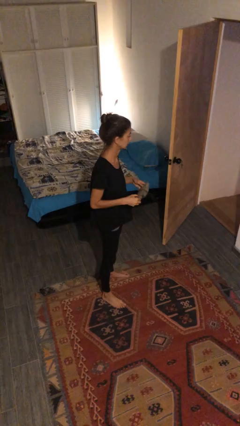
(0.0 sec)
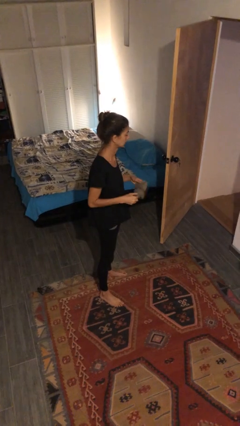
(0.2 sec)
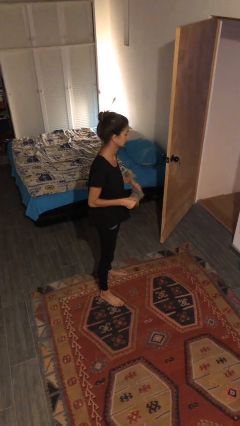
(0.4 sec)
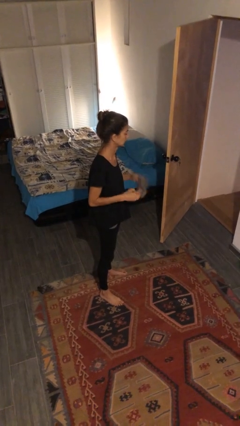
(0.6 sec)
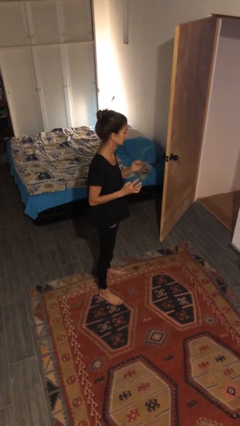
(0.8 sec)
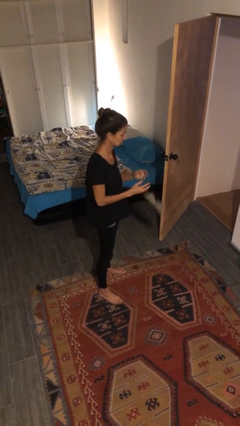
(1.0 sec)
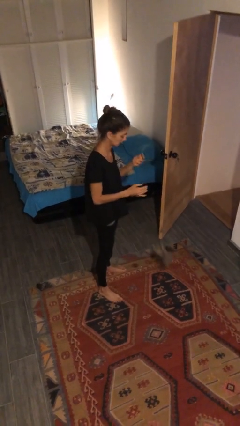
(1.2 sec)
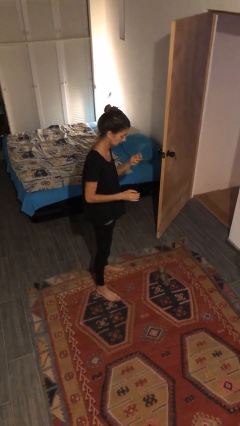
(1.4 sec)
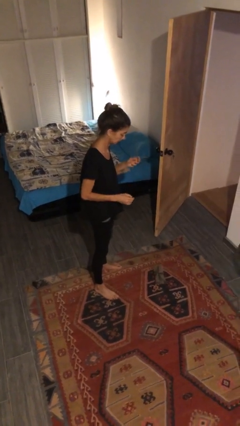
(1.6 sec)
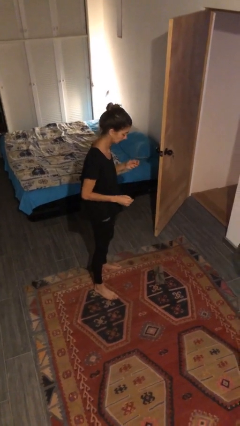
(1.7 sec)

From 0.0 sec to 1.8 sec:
person drops object

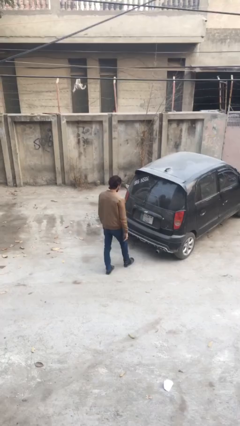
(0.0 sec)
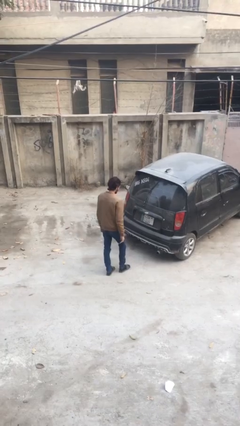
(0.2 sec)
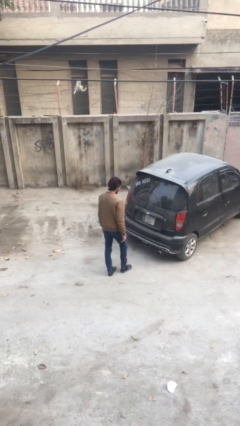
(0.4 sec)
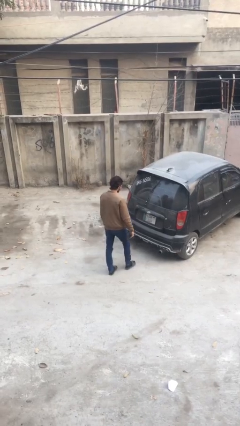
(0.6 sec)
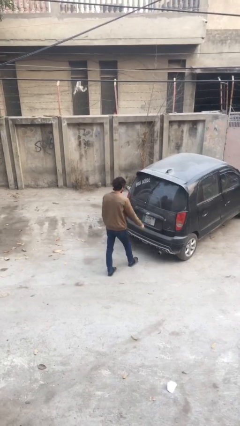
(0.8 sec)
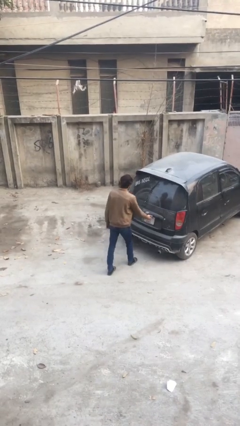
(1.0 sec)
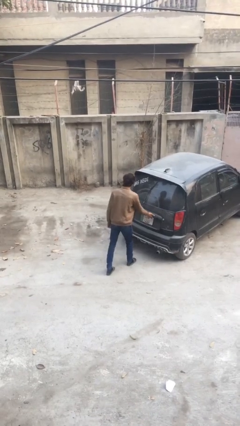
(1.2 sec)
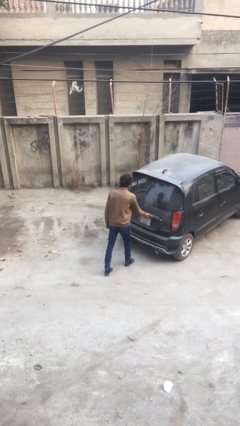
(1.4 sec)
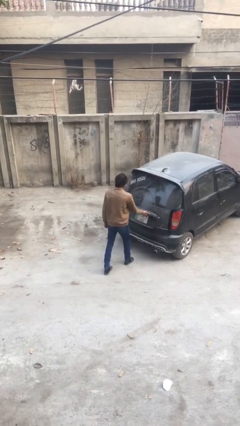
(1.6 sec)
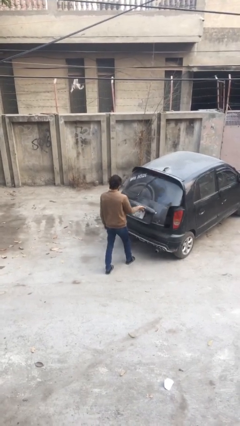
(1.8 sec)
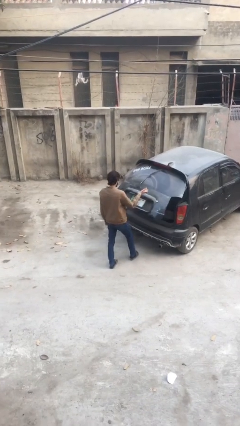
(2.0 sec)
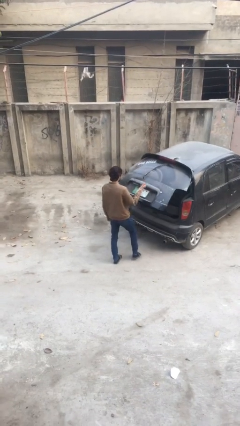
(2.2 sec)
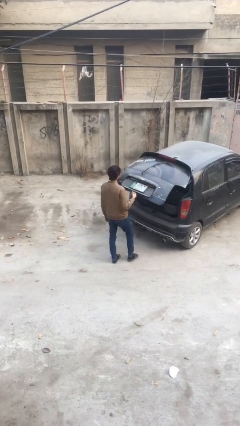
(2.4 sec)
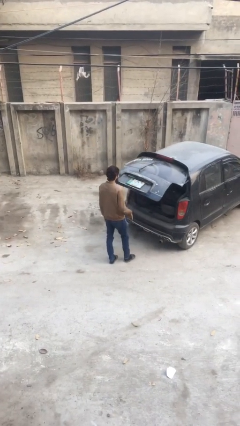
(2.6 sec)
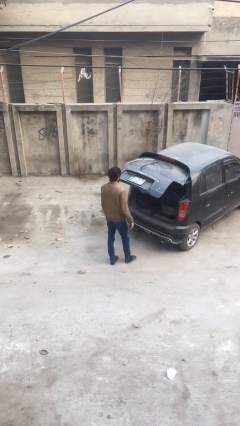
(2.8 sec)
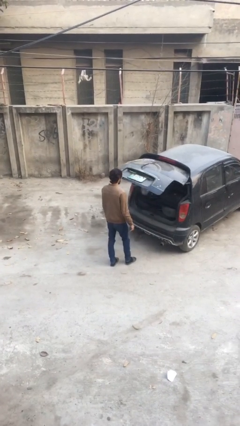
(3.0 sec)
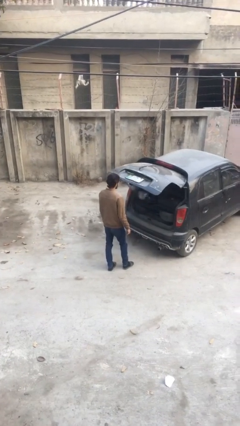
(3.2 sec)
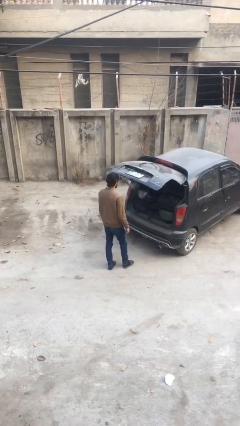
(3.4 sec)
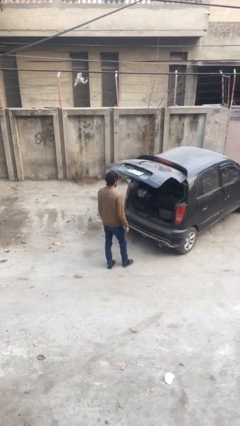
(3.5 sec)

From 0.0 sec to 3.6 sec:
person opens car trunk

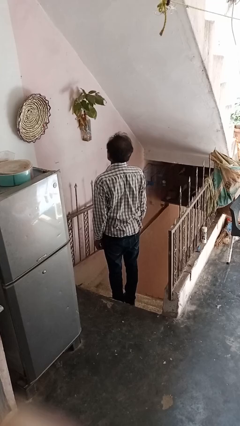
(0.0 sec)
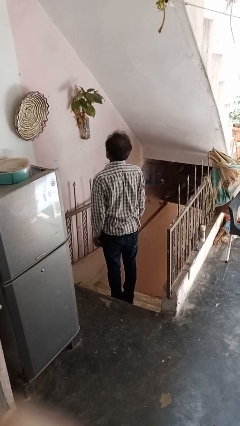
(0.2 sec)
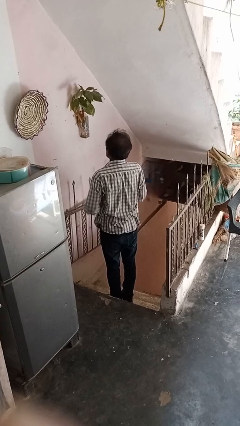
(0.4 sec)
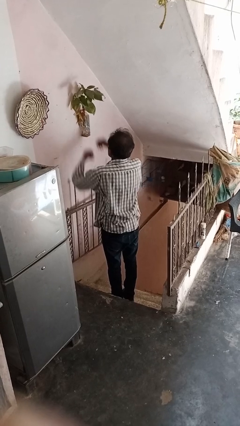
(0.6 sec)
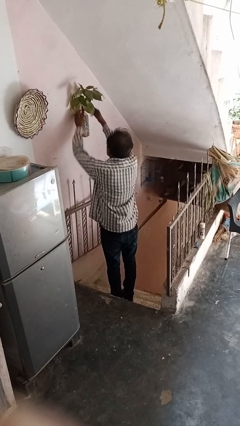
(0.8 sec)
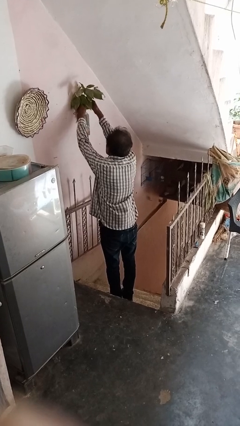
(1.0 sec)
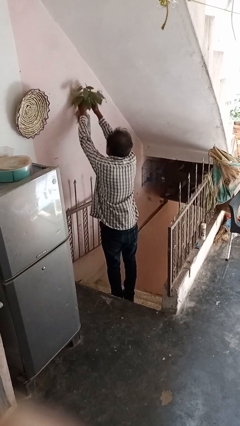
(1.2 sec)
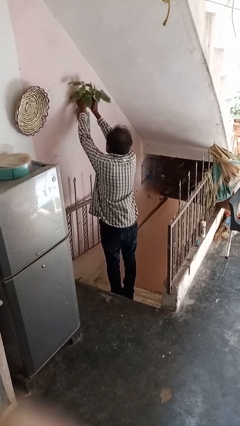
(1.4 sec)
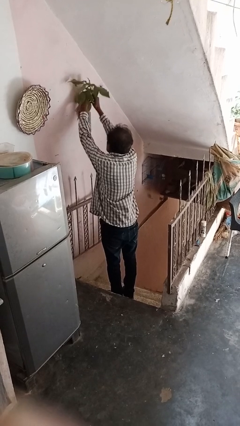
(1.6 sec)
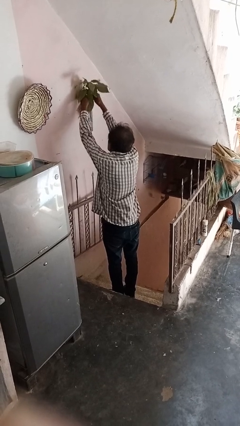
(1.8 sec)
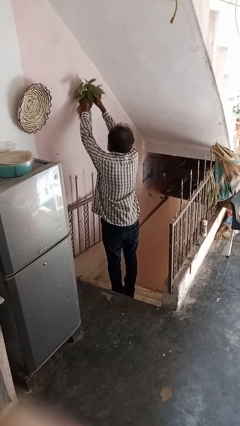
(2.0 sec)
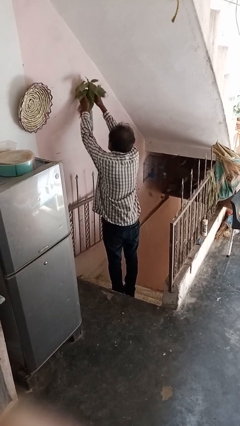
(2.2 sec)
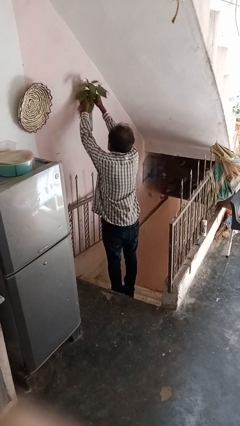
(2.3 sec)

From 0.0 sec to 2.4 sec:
person arranges flowers in vase

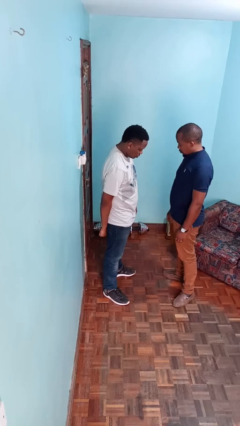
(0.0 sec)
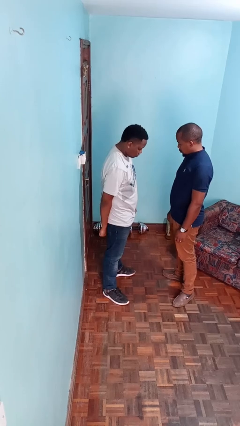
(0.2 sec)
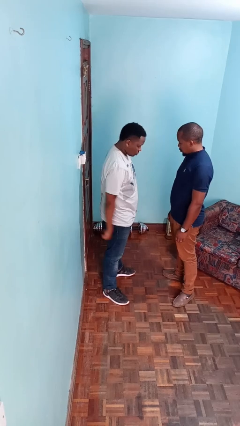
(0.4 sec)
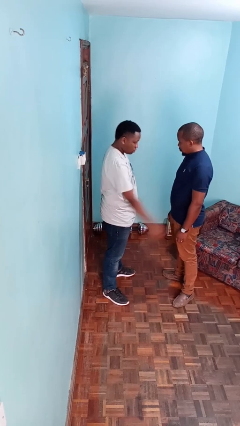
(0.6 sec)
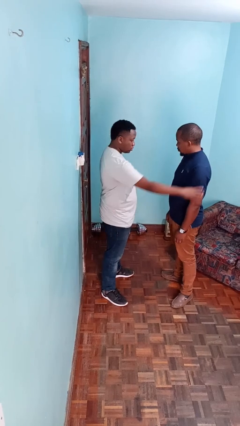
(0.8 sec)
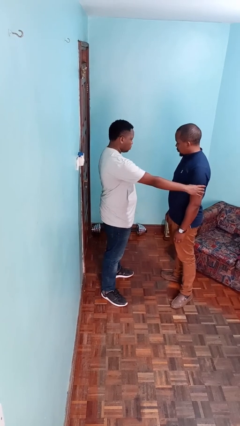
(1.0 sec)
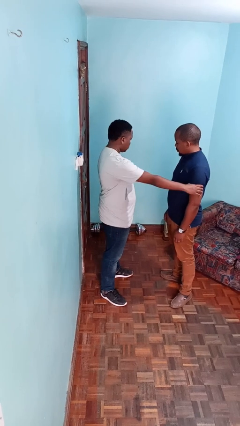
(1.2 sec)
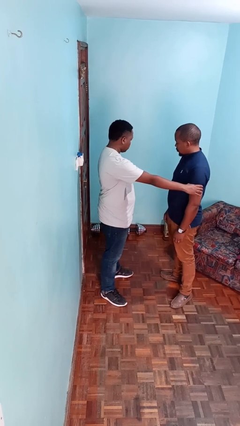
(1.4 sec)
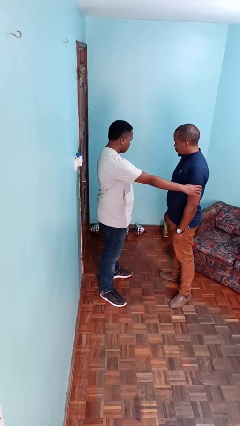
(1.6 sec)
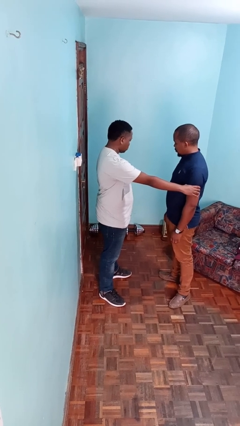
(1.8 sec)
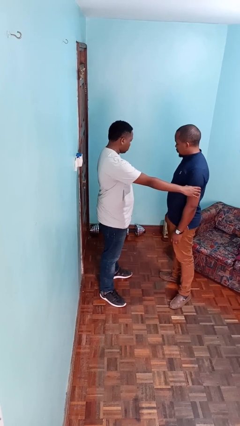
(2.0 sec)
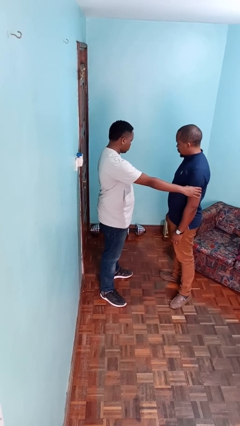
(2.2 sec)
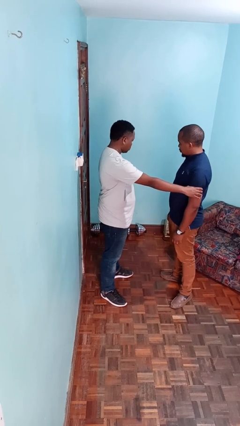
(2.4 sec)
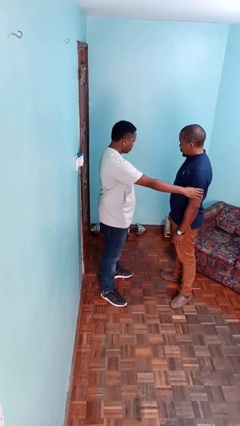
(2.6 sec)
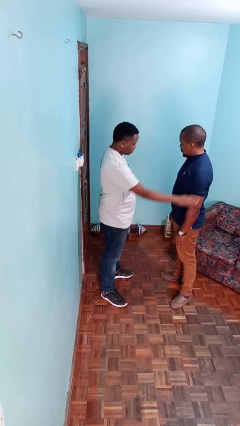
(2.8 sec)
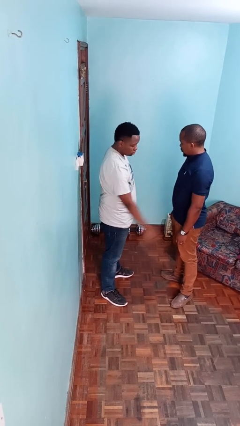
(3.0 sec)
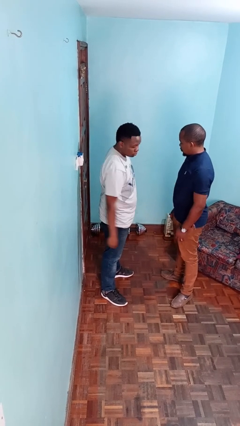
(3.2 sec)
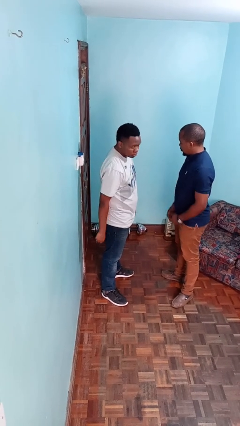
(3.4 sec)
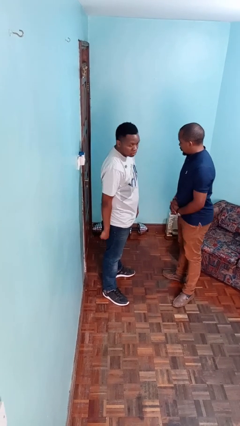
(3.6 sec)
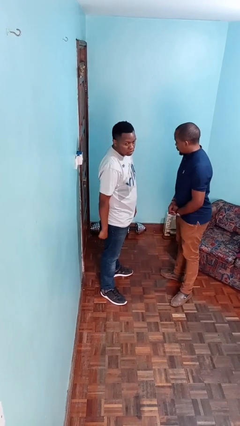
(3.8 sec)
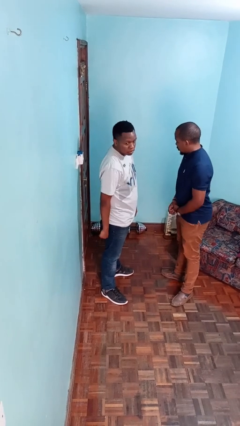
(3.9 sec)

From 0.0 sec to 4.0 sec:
person grabs person by bicep

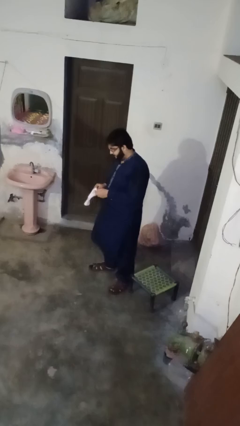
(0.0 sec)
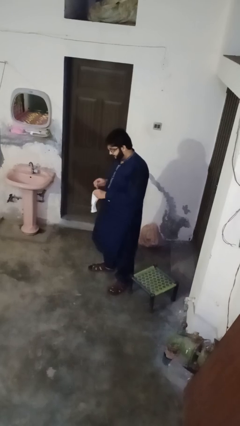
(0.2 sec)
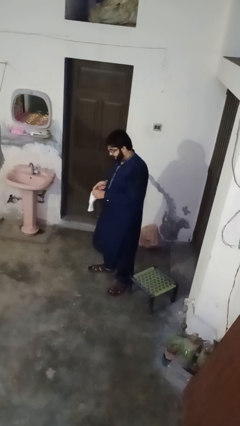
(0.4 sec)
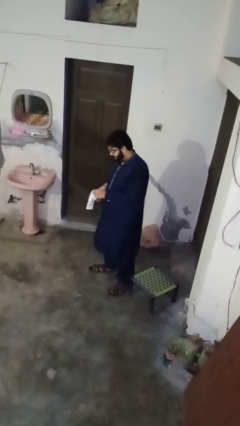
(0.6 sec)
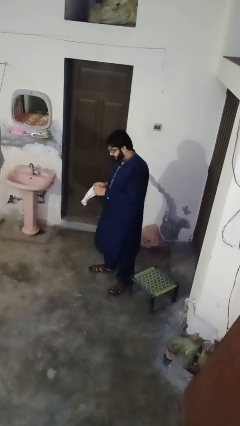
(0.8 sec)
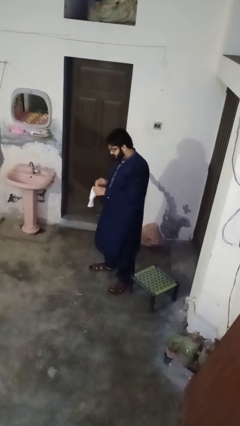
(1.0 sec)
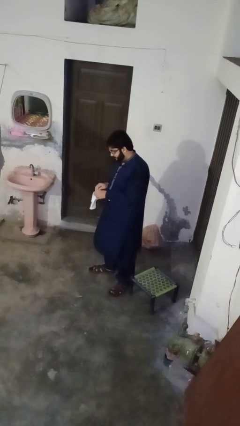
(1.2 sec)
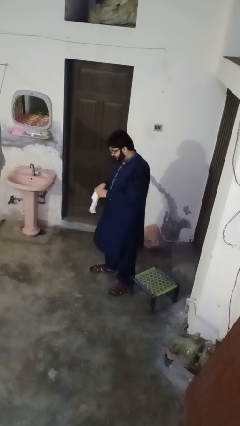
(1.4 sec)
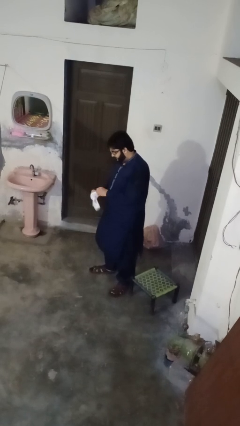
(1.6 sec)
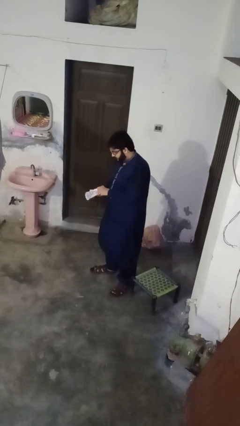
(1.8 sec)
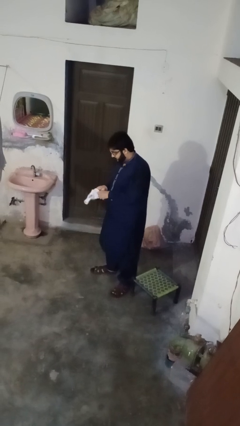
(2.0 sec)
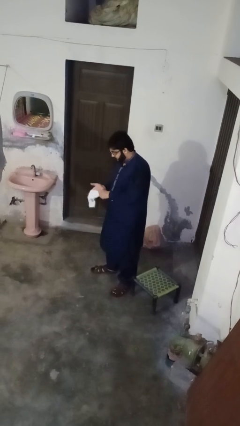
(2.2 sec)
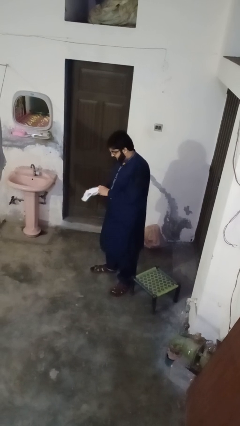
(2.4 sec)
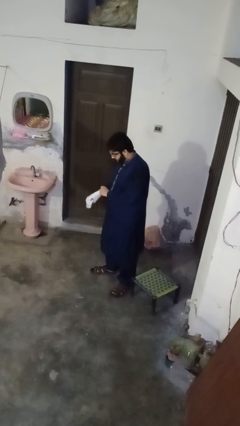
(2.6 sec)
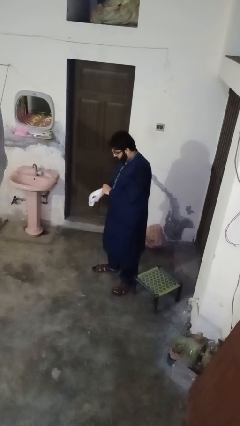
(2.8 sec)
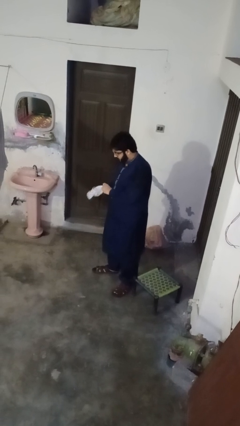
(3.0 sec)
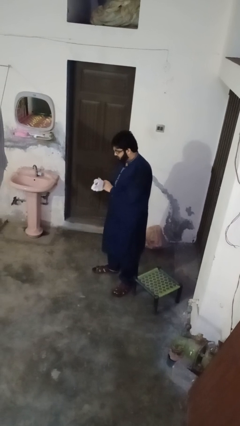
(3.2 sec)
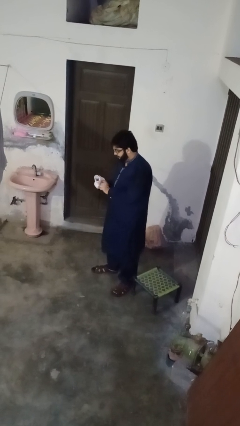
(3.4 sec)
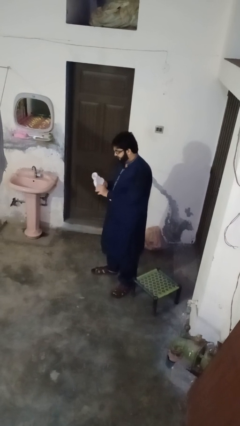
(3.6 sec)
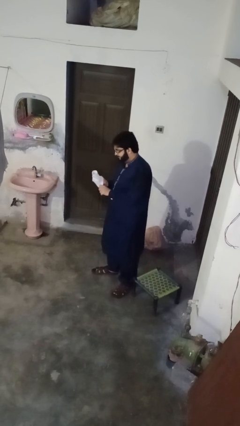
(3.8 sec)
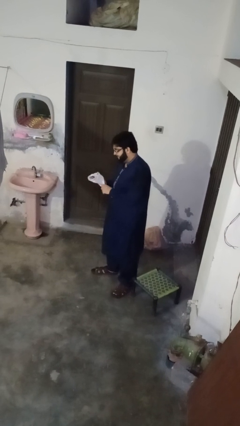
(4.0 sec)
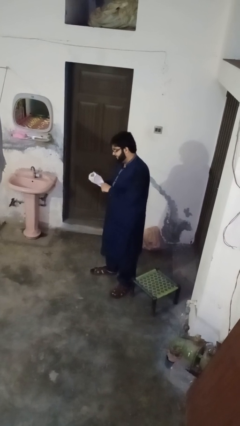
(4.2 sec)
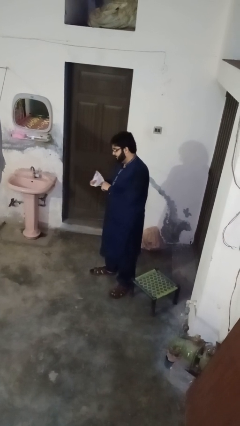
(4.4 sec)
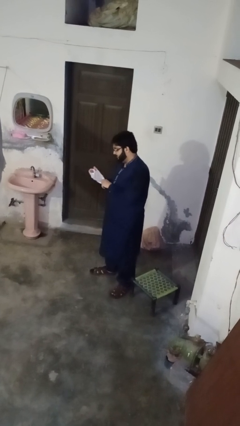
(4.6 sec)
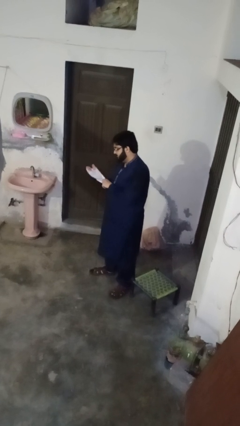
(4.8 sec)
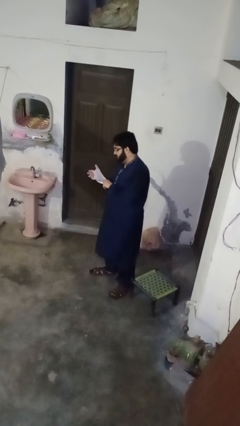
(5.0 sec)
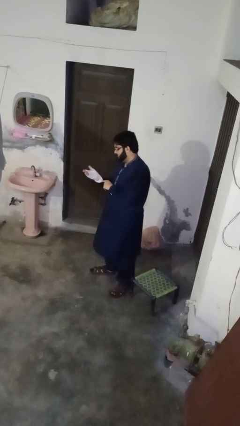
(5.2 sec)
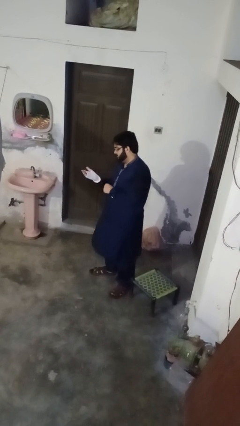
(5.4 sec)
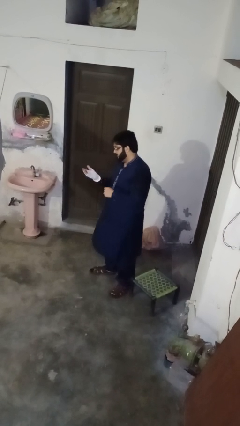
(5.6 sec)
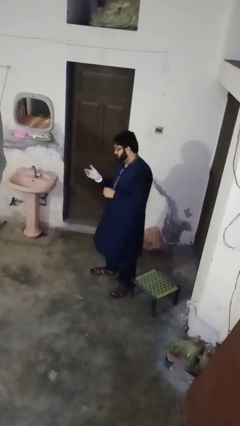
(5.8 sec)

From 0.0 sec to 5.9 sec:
person puts on gloves
